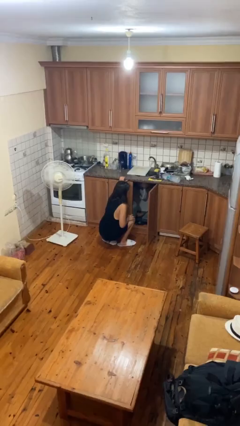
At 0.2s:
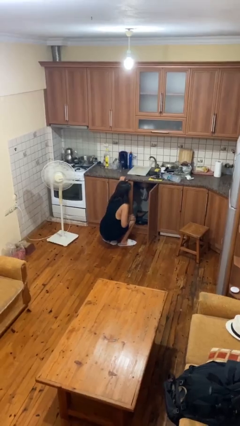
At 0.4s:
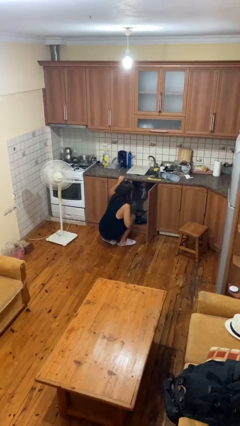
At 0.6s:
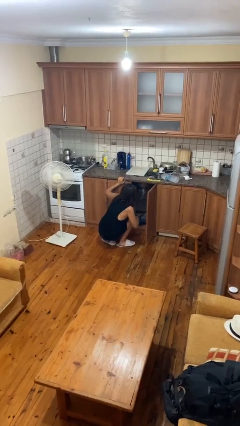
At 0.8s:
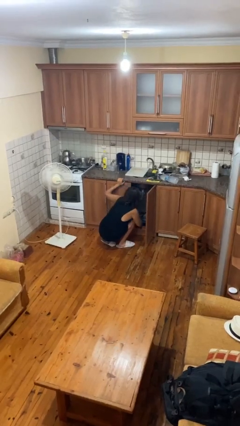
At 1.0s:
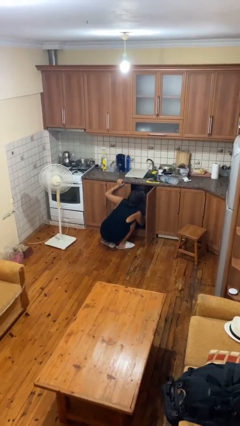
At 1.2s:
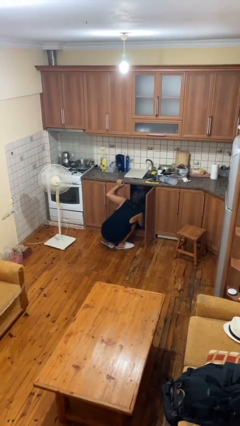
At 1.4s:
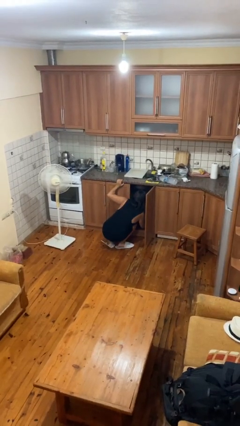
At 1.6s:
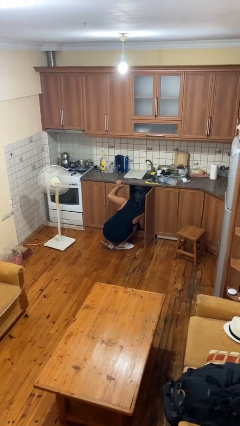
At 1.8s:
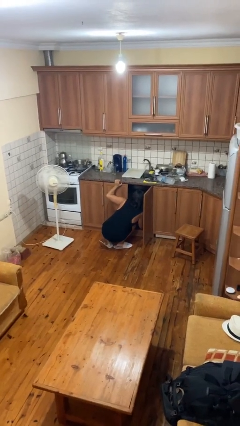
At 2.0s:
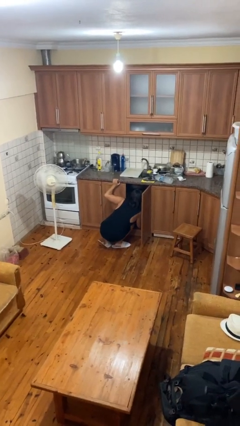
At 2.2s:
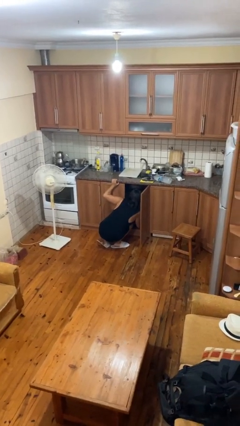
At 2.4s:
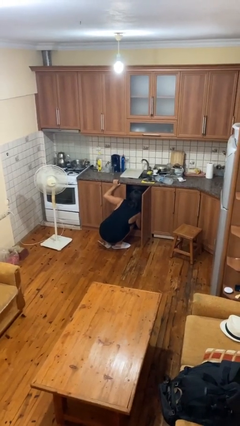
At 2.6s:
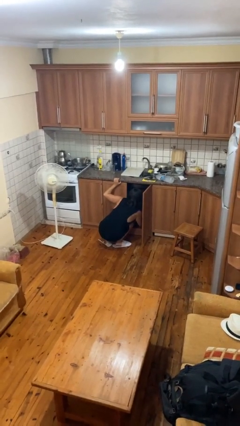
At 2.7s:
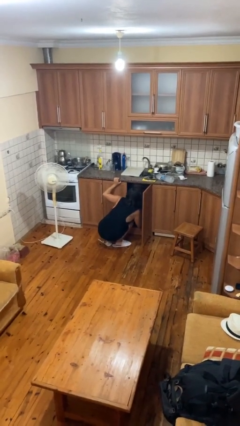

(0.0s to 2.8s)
person searches in cabinet

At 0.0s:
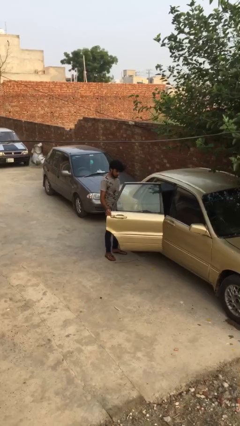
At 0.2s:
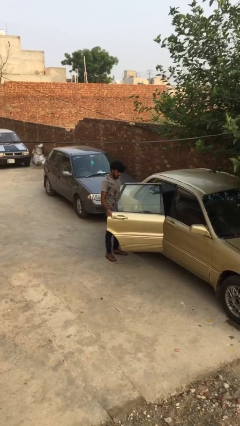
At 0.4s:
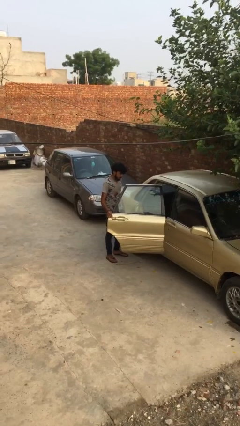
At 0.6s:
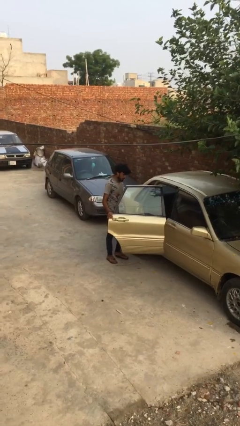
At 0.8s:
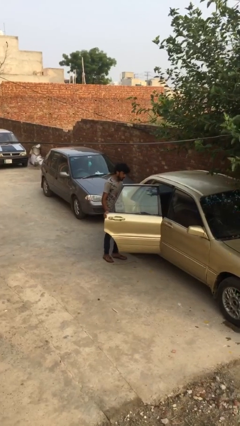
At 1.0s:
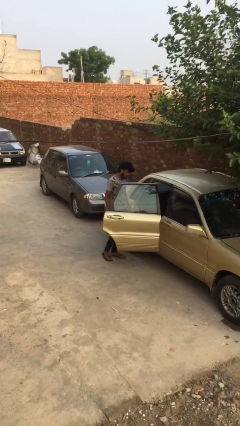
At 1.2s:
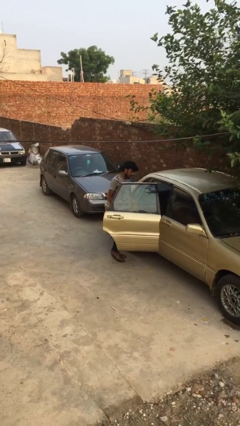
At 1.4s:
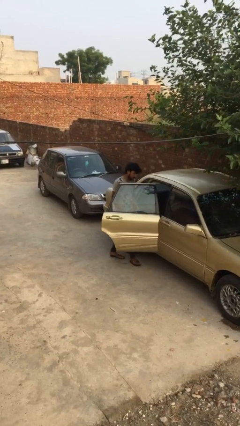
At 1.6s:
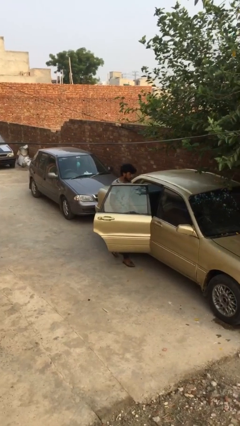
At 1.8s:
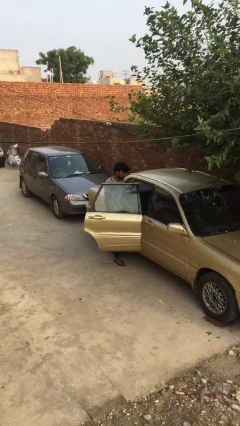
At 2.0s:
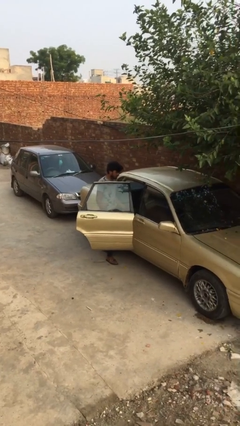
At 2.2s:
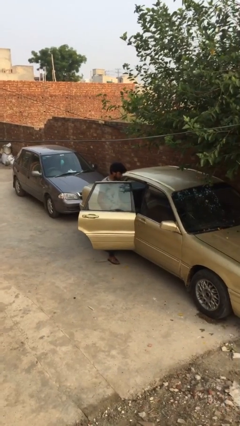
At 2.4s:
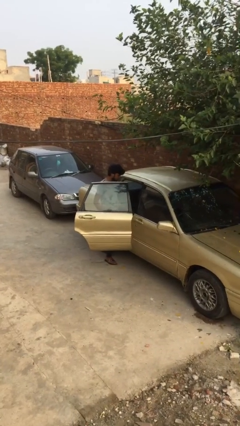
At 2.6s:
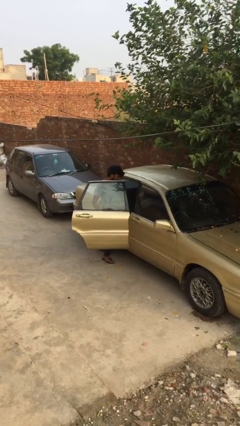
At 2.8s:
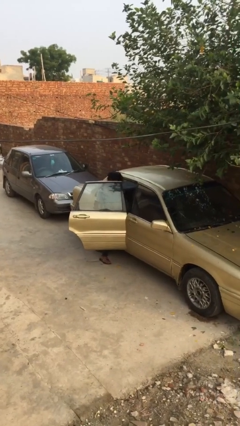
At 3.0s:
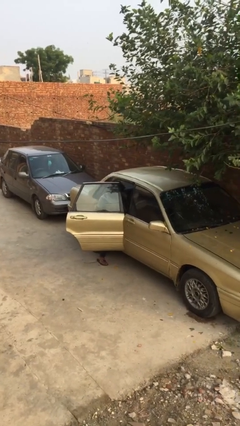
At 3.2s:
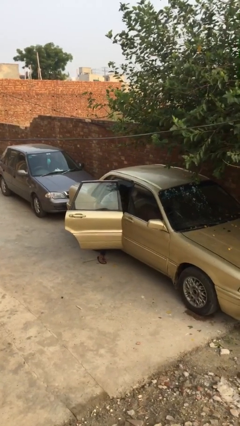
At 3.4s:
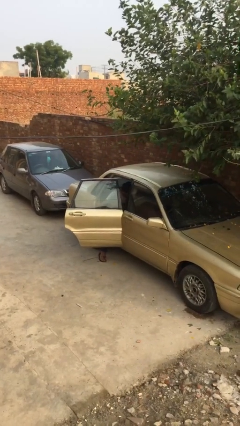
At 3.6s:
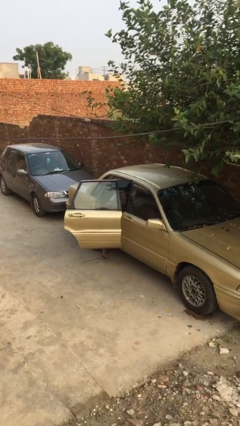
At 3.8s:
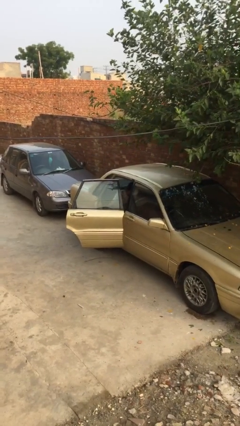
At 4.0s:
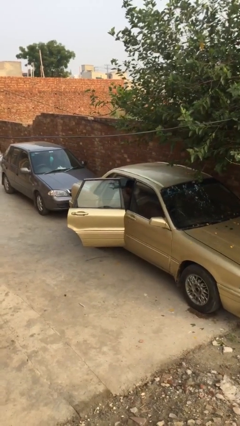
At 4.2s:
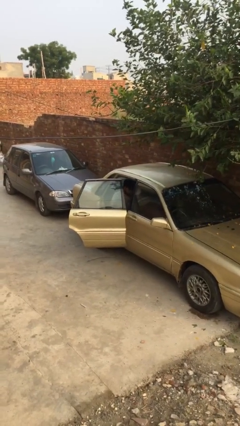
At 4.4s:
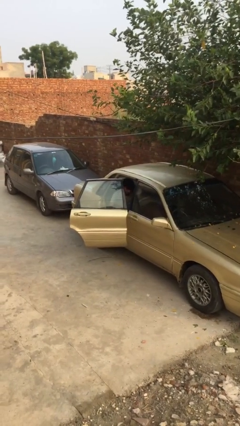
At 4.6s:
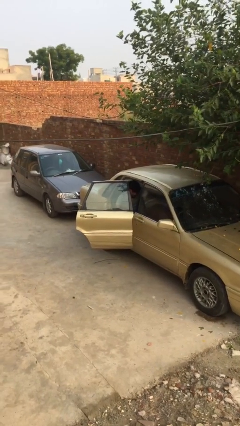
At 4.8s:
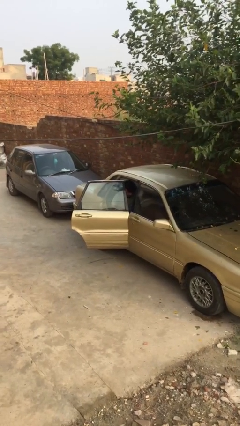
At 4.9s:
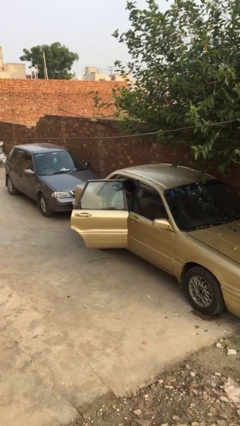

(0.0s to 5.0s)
person enters car

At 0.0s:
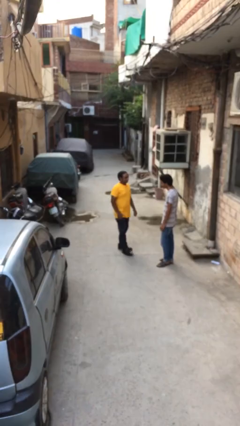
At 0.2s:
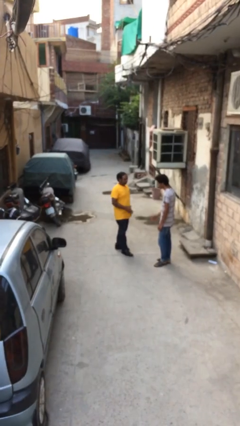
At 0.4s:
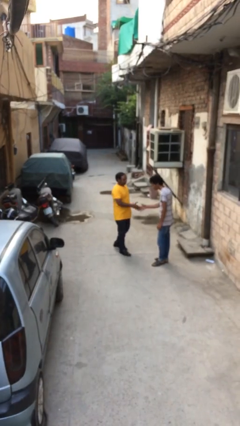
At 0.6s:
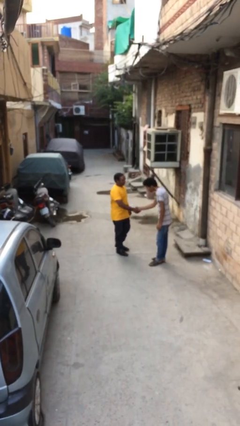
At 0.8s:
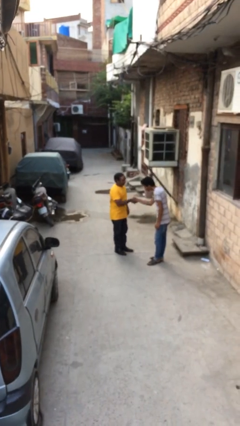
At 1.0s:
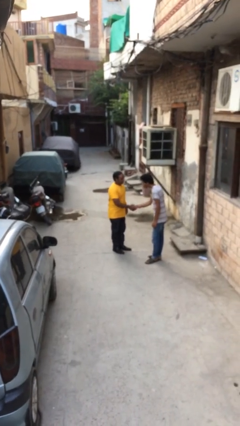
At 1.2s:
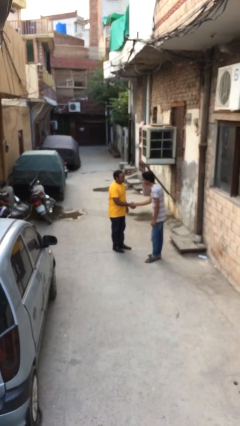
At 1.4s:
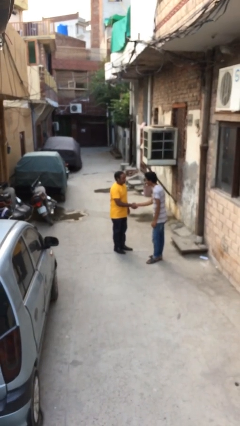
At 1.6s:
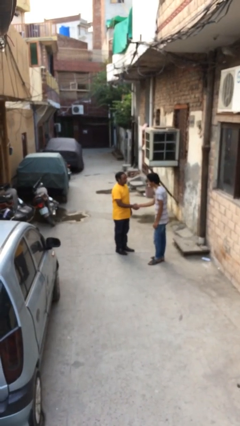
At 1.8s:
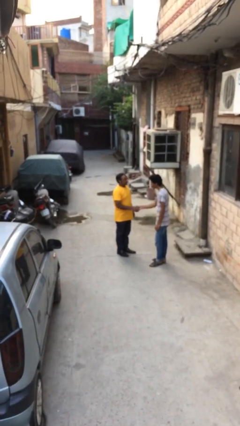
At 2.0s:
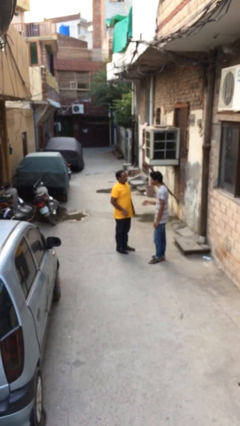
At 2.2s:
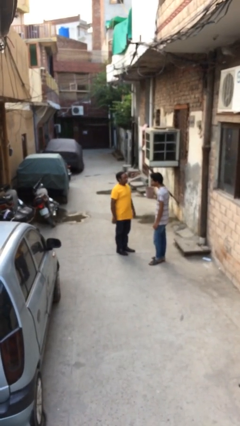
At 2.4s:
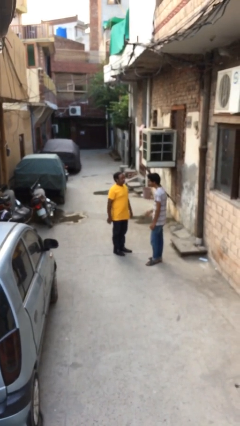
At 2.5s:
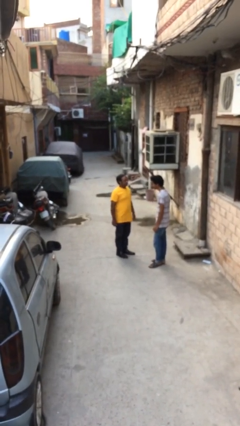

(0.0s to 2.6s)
person shakes hand

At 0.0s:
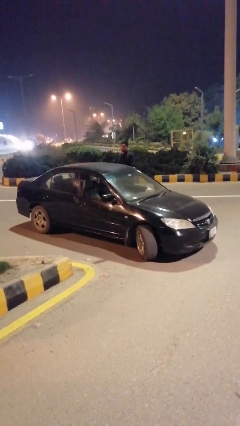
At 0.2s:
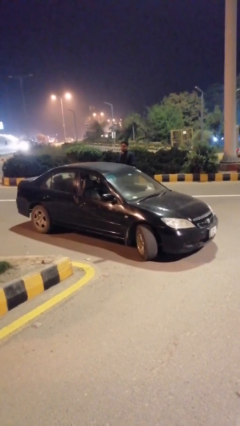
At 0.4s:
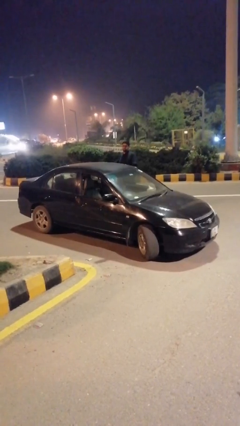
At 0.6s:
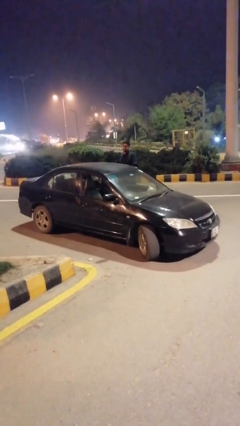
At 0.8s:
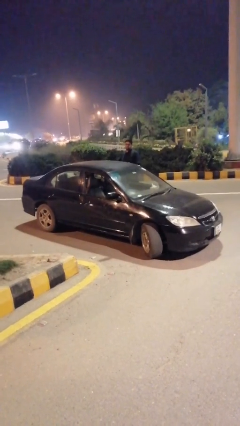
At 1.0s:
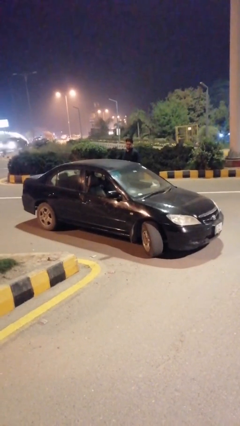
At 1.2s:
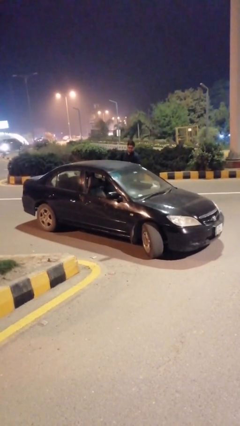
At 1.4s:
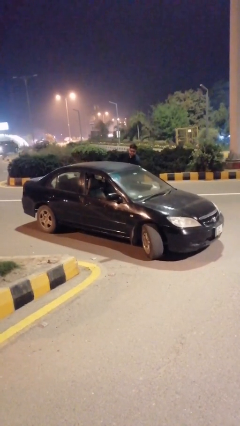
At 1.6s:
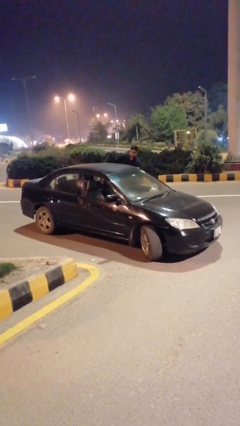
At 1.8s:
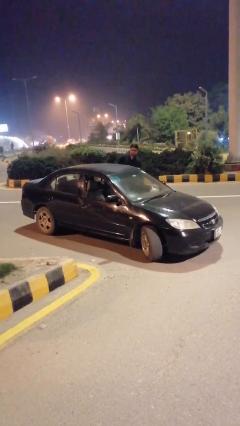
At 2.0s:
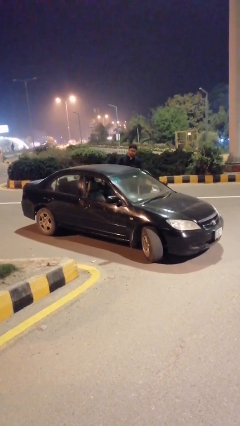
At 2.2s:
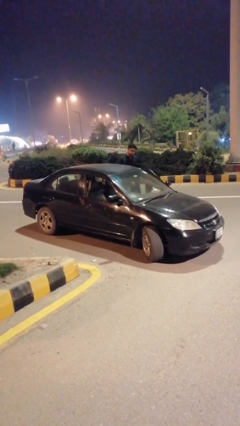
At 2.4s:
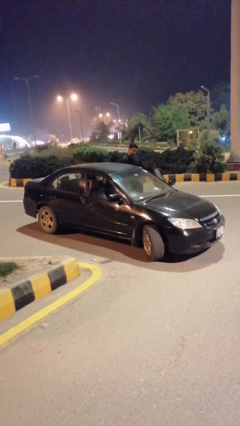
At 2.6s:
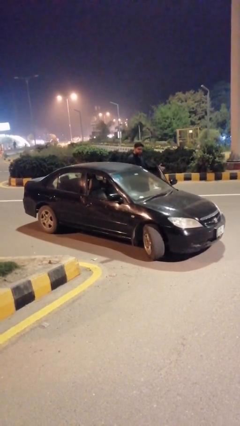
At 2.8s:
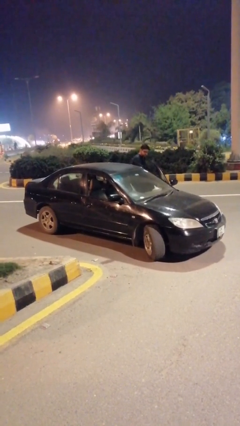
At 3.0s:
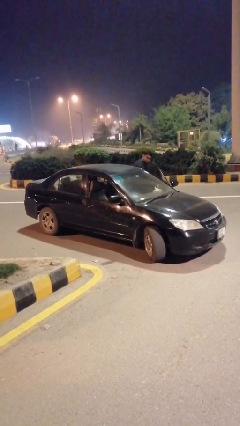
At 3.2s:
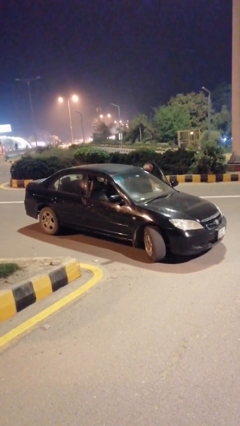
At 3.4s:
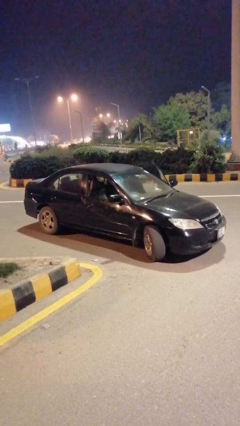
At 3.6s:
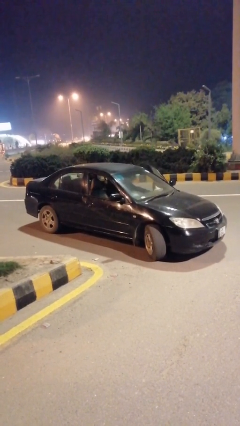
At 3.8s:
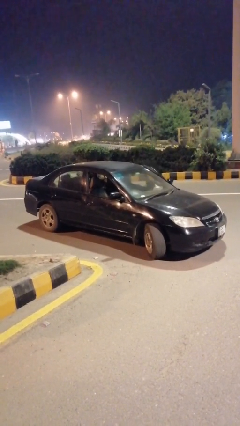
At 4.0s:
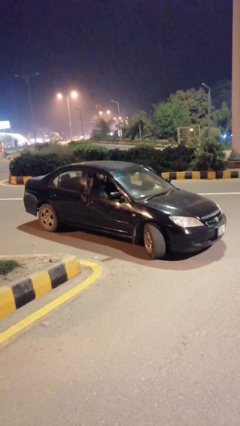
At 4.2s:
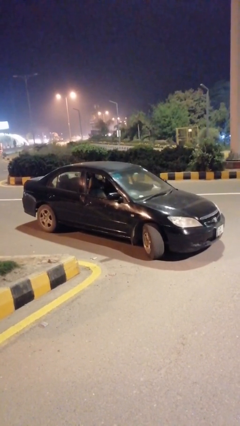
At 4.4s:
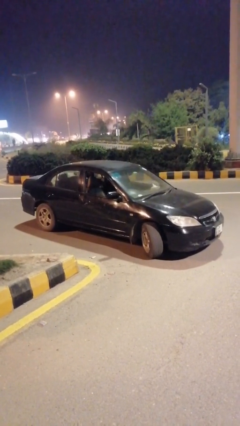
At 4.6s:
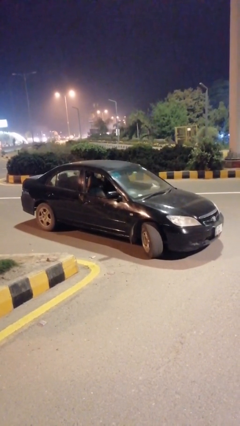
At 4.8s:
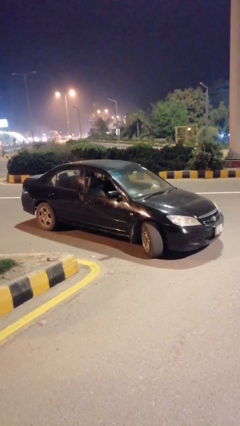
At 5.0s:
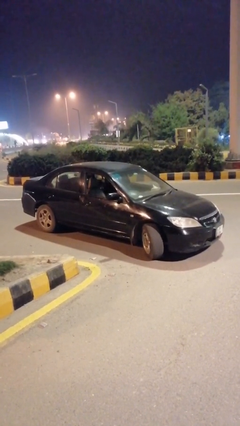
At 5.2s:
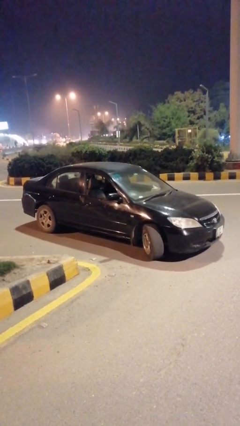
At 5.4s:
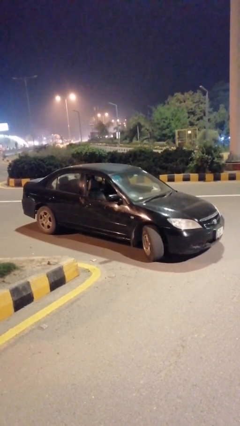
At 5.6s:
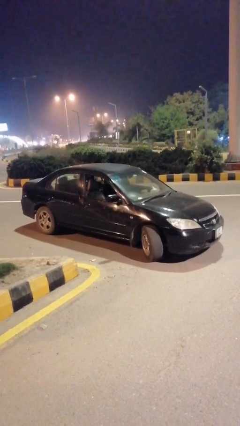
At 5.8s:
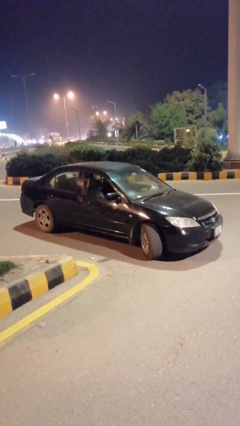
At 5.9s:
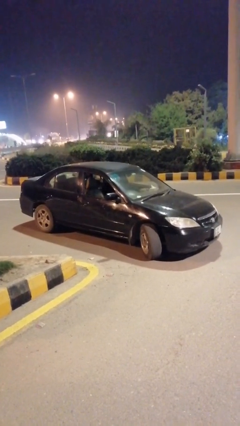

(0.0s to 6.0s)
car picks up person

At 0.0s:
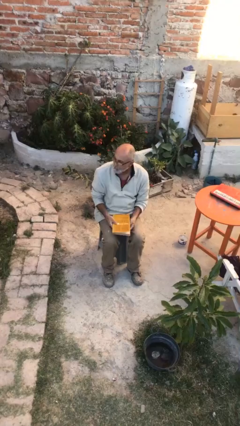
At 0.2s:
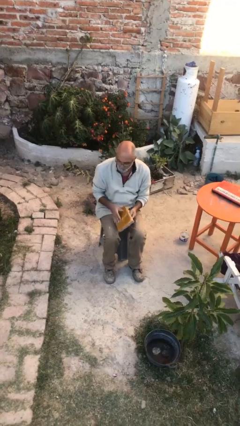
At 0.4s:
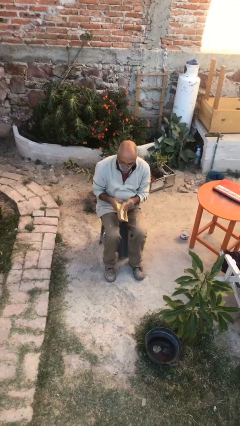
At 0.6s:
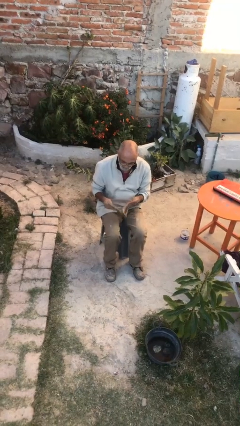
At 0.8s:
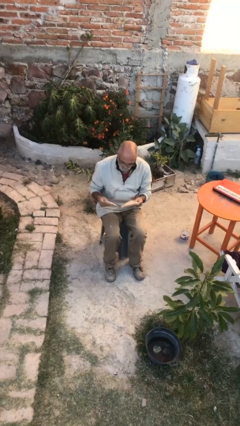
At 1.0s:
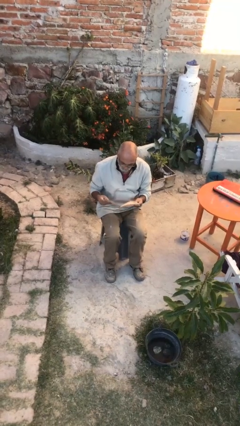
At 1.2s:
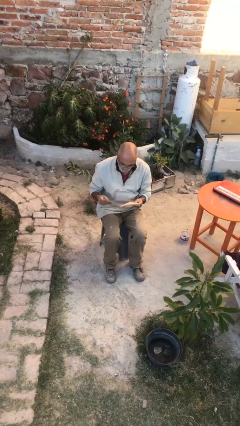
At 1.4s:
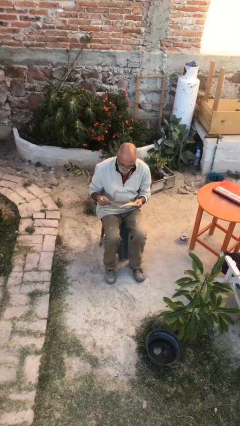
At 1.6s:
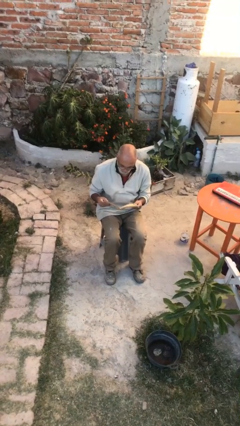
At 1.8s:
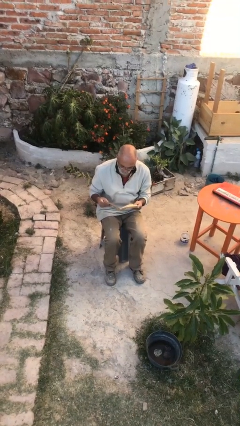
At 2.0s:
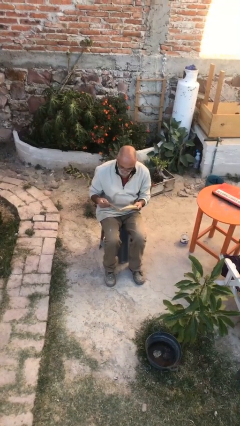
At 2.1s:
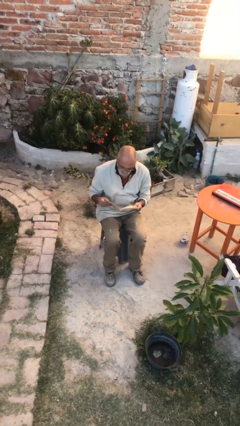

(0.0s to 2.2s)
person reads document
